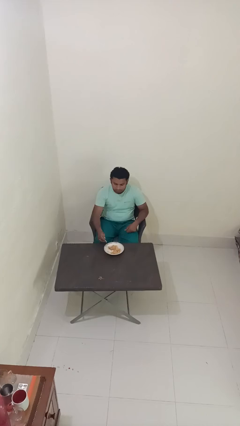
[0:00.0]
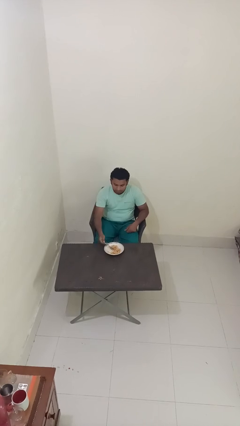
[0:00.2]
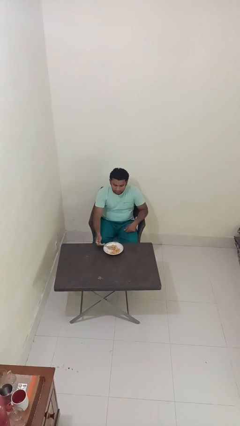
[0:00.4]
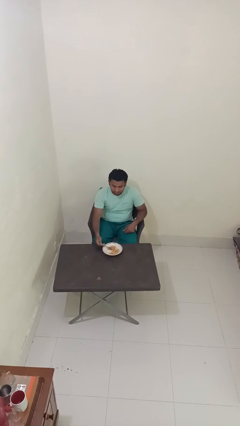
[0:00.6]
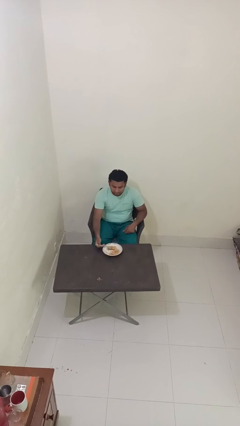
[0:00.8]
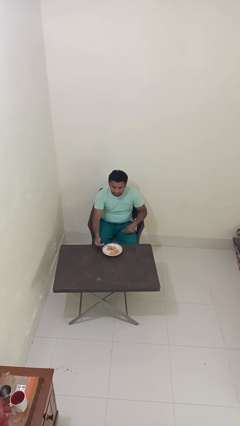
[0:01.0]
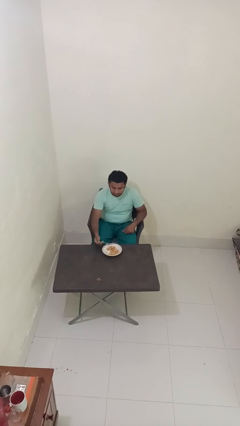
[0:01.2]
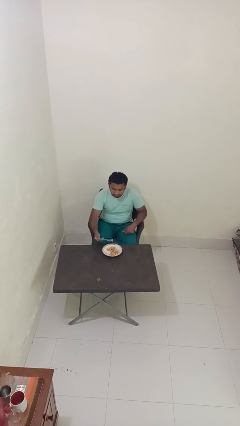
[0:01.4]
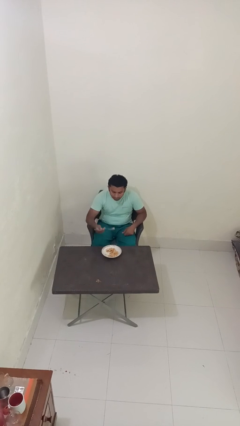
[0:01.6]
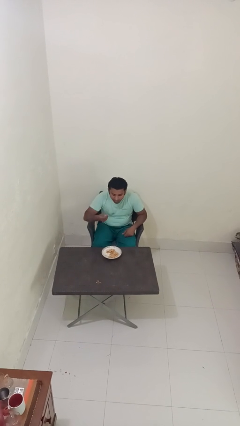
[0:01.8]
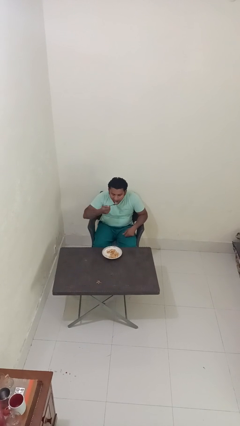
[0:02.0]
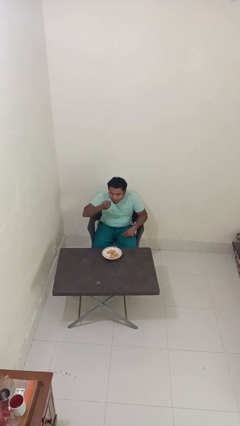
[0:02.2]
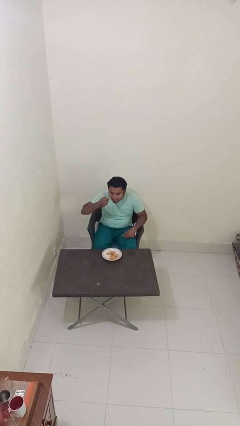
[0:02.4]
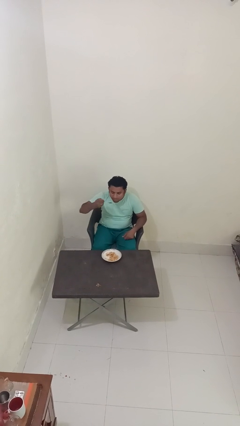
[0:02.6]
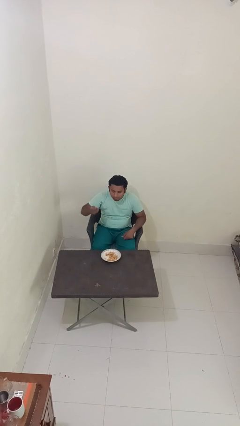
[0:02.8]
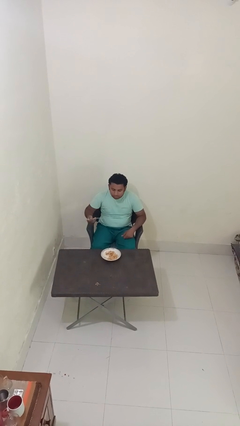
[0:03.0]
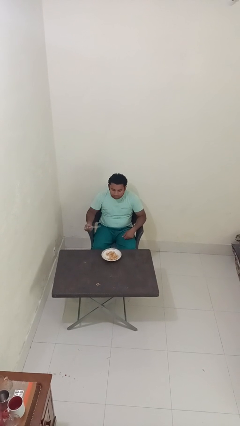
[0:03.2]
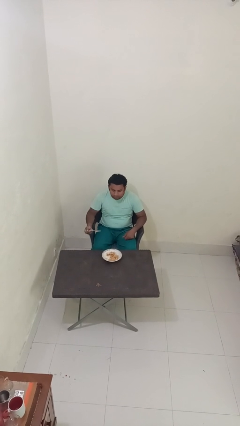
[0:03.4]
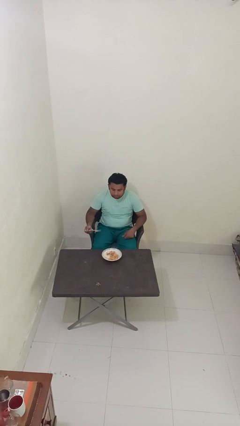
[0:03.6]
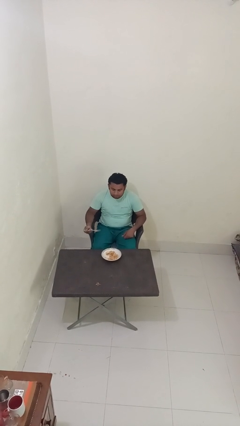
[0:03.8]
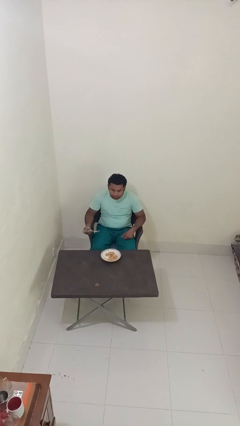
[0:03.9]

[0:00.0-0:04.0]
person eats with utensil

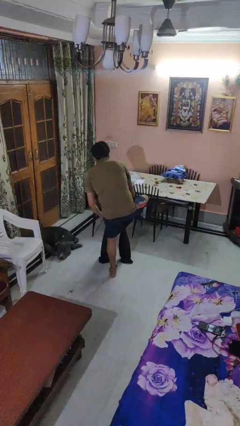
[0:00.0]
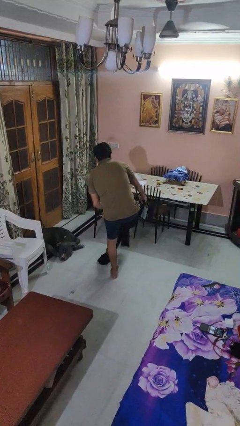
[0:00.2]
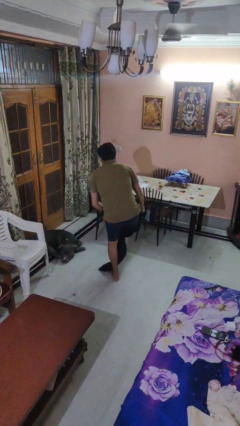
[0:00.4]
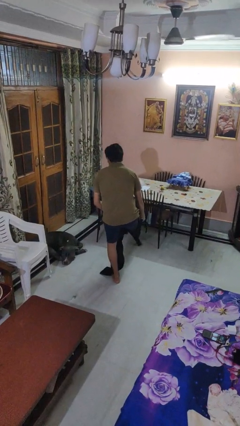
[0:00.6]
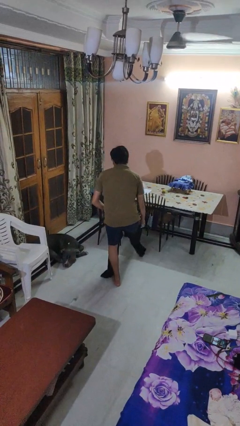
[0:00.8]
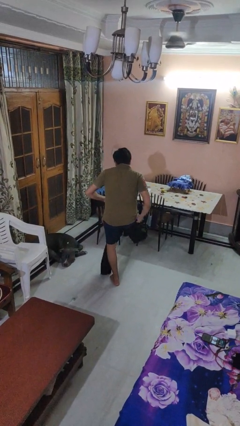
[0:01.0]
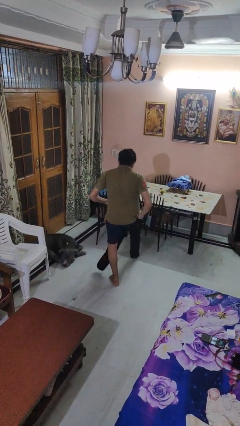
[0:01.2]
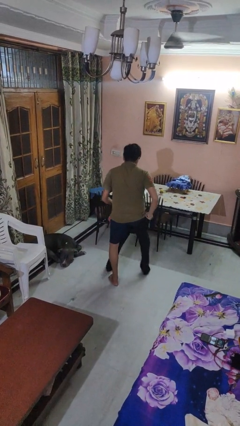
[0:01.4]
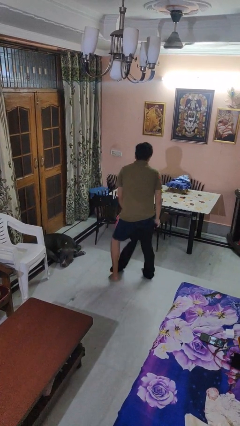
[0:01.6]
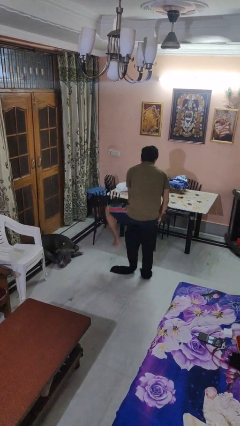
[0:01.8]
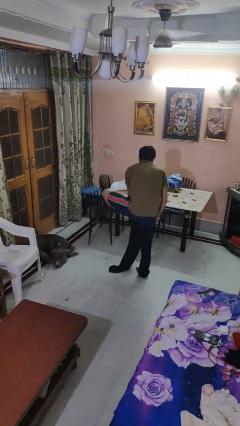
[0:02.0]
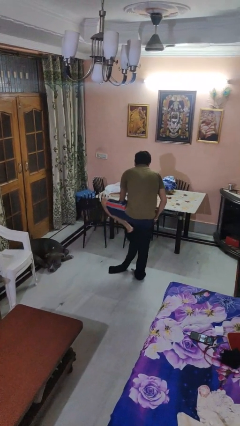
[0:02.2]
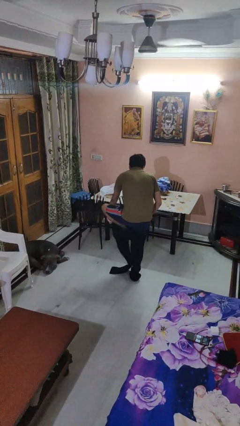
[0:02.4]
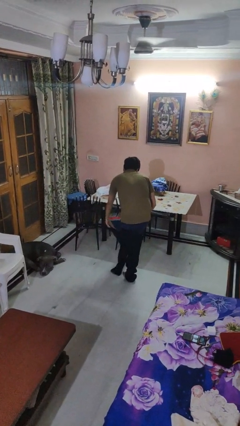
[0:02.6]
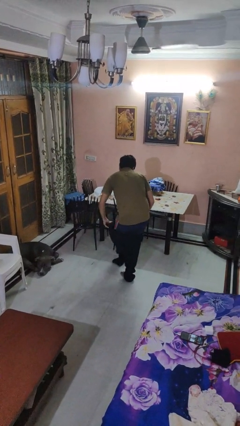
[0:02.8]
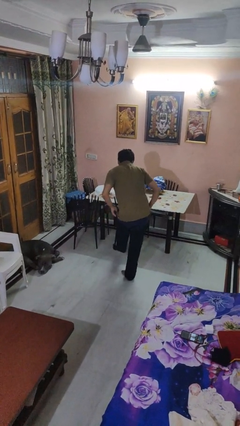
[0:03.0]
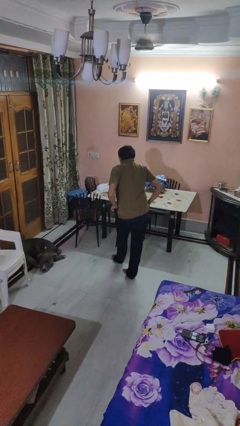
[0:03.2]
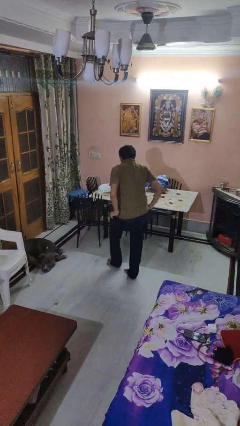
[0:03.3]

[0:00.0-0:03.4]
person puts on pants

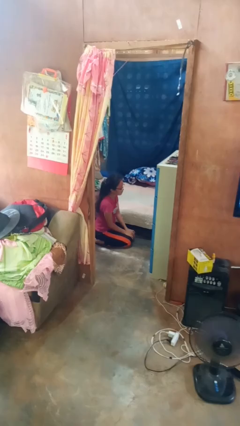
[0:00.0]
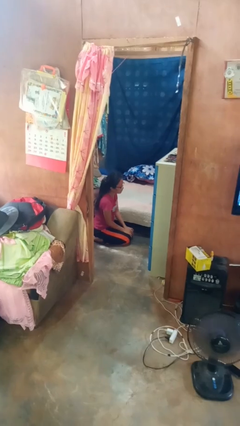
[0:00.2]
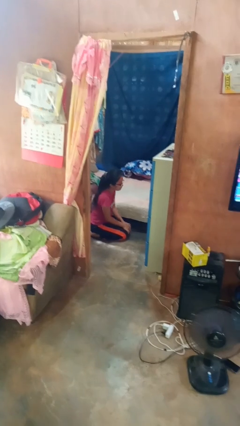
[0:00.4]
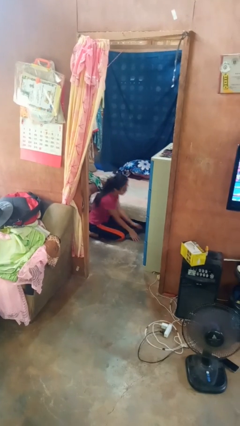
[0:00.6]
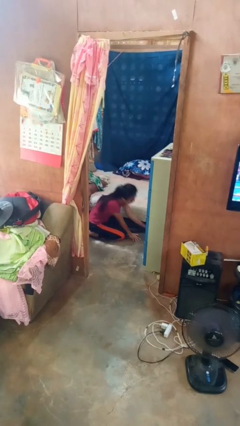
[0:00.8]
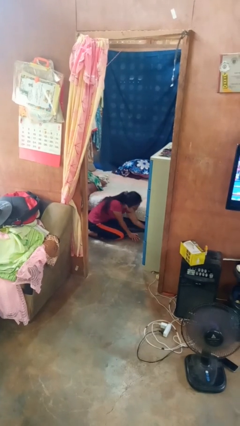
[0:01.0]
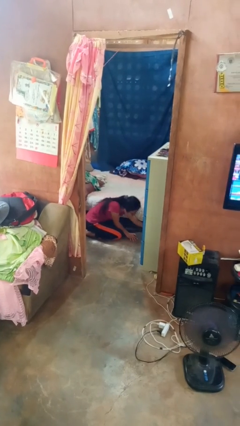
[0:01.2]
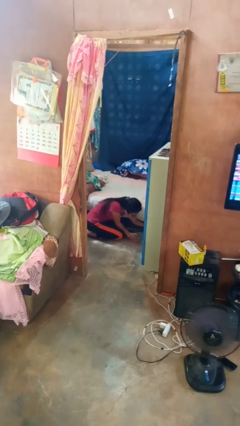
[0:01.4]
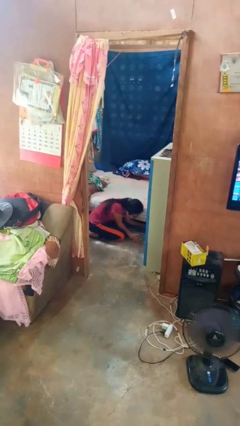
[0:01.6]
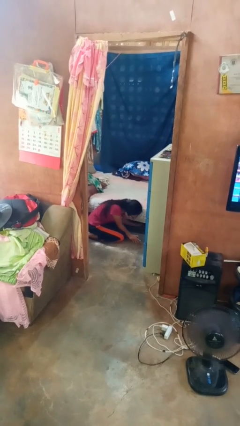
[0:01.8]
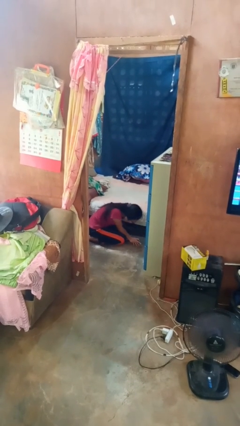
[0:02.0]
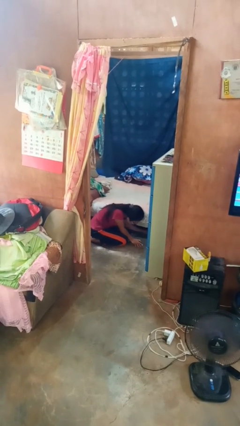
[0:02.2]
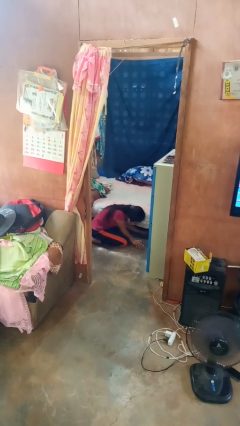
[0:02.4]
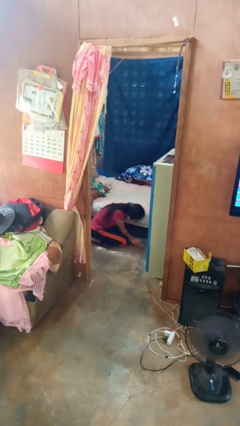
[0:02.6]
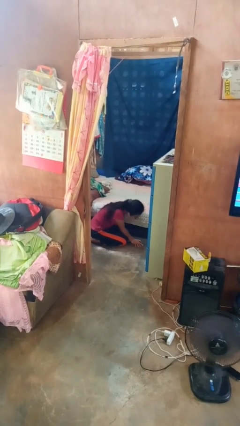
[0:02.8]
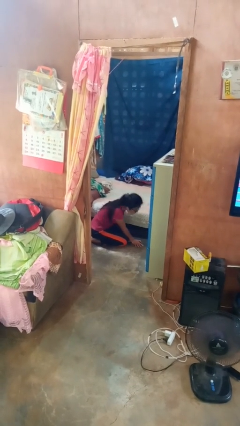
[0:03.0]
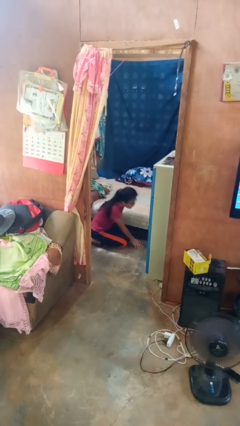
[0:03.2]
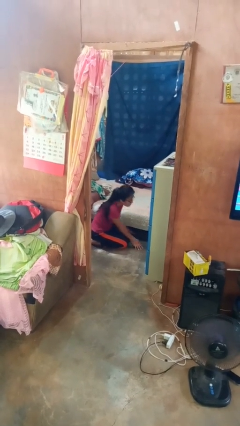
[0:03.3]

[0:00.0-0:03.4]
person searches under bed

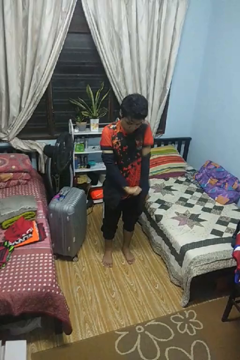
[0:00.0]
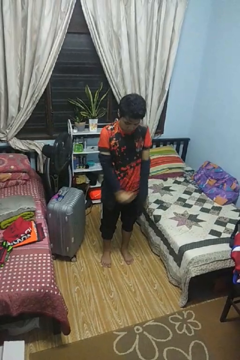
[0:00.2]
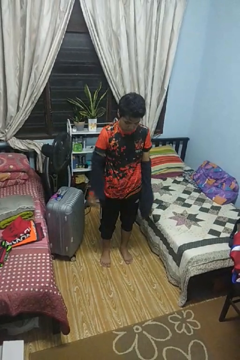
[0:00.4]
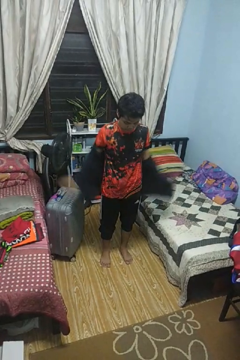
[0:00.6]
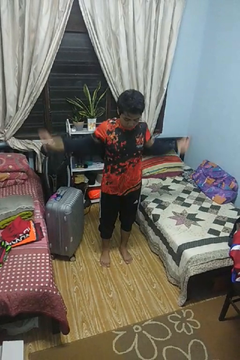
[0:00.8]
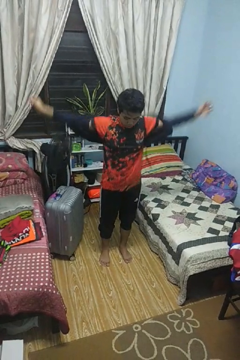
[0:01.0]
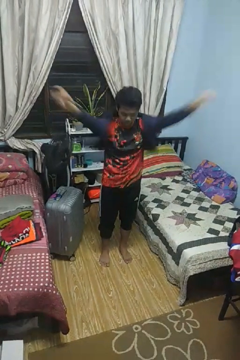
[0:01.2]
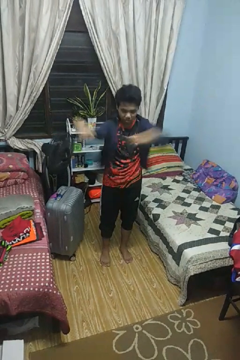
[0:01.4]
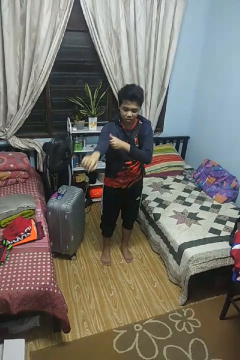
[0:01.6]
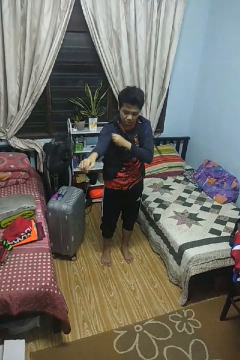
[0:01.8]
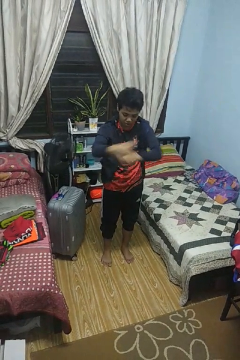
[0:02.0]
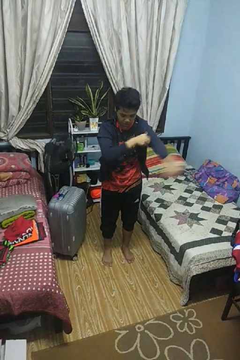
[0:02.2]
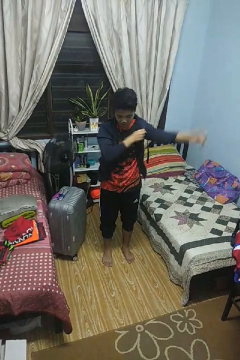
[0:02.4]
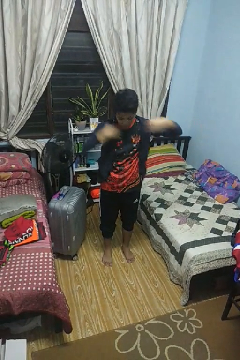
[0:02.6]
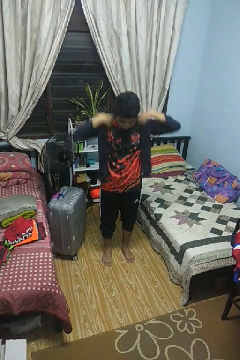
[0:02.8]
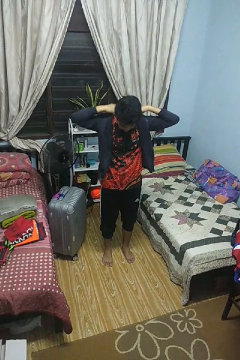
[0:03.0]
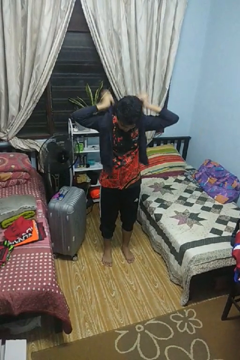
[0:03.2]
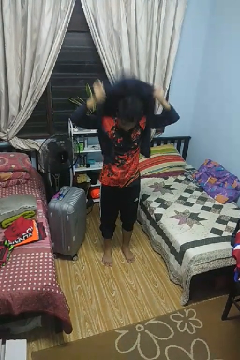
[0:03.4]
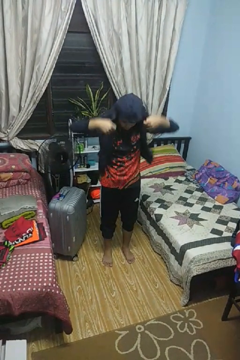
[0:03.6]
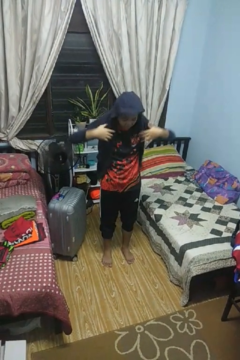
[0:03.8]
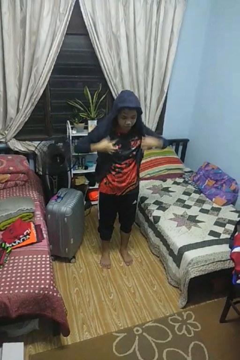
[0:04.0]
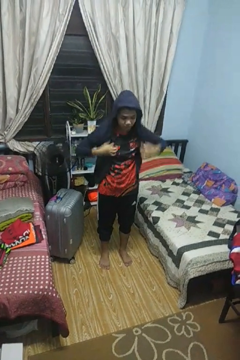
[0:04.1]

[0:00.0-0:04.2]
person puts on hoodie

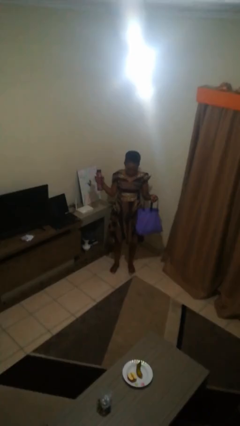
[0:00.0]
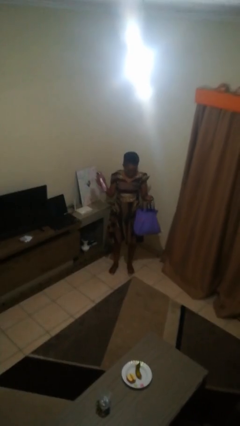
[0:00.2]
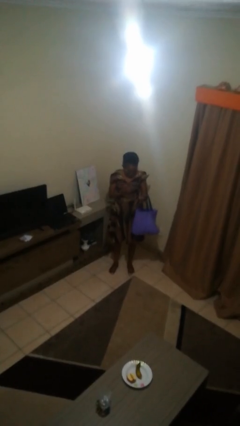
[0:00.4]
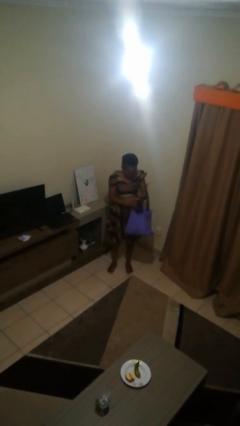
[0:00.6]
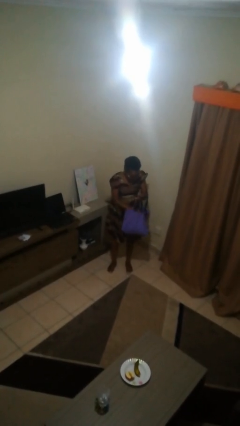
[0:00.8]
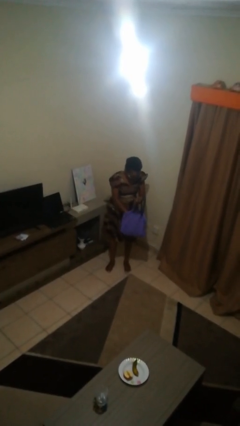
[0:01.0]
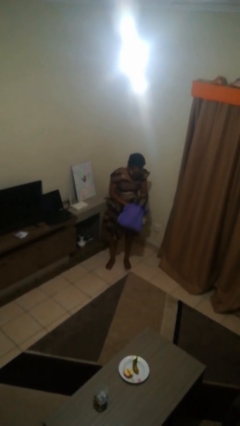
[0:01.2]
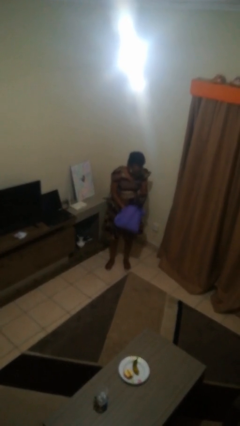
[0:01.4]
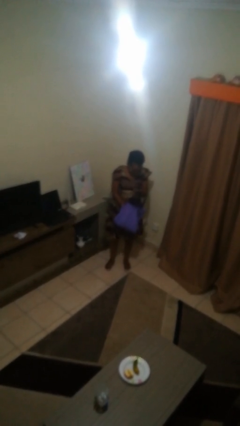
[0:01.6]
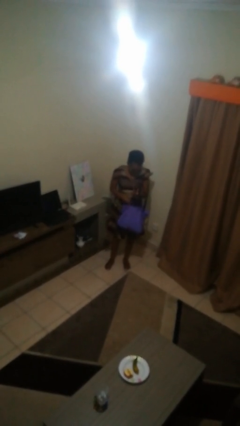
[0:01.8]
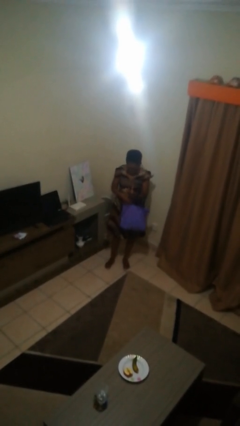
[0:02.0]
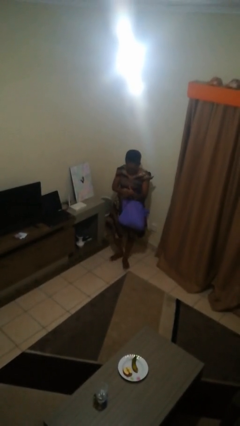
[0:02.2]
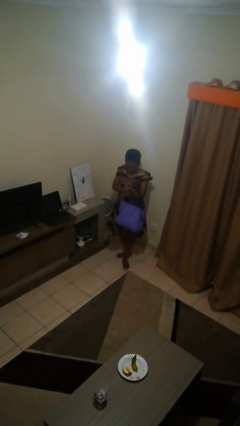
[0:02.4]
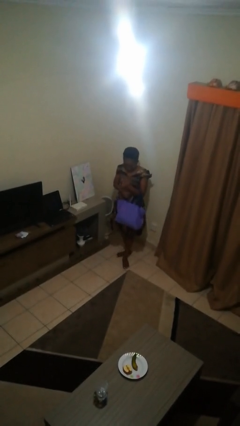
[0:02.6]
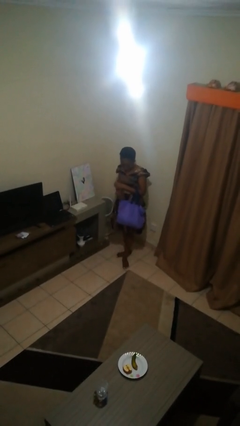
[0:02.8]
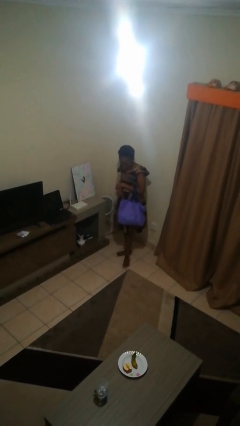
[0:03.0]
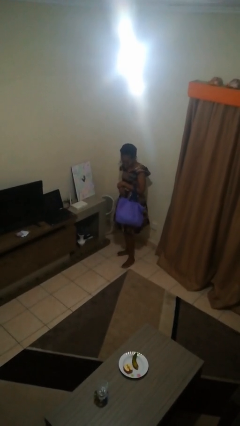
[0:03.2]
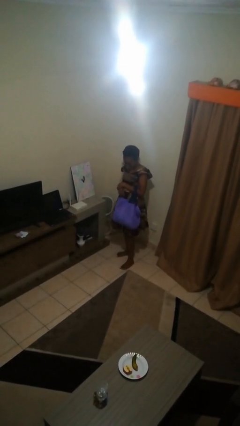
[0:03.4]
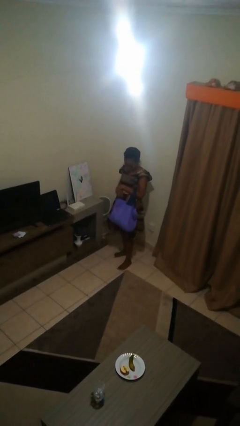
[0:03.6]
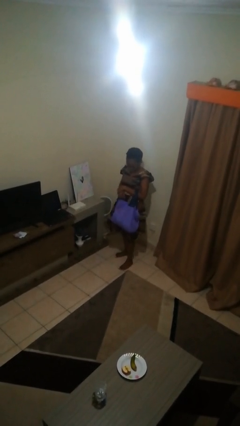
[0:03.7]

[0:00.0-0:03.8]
person puts object into bag
